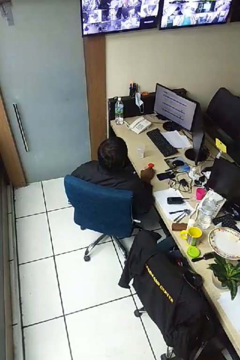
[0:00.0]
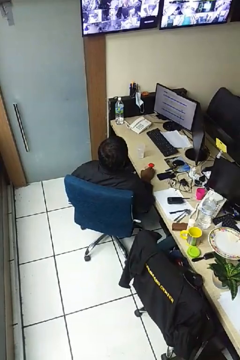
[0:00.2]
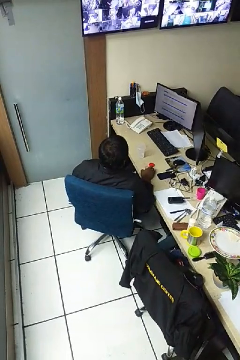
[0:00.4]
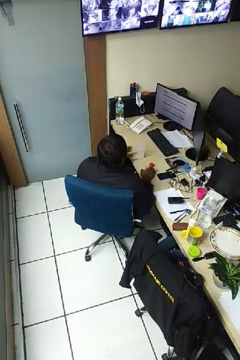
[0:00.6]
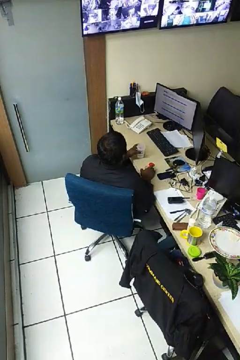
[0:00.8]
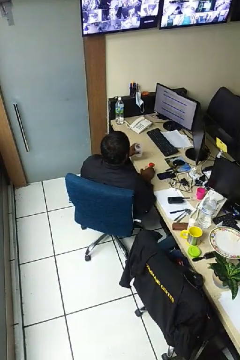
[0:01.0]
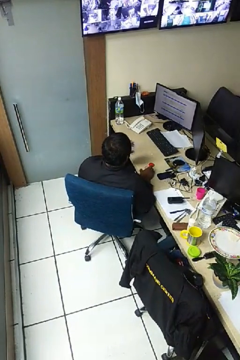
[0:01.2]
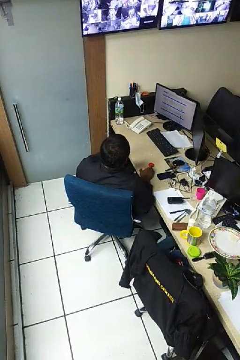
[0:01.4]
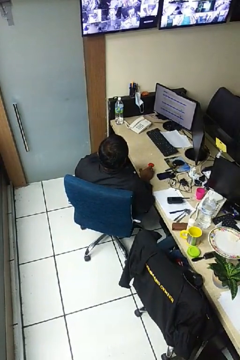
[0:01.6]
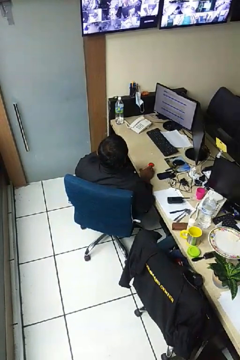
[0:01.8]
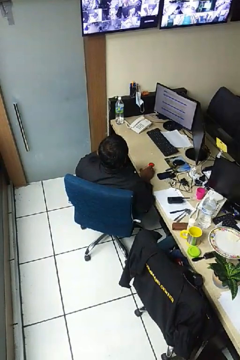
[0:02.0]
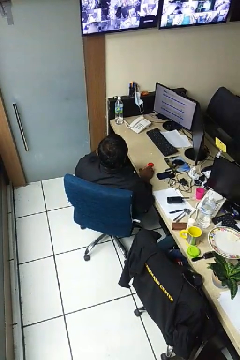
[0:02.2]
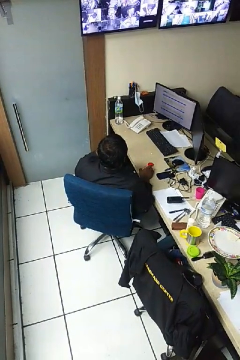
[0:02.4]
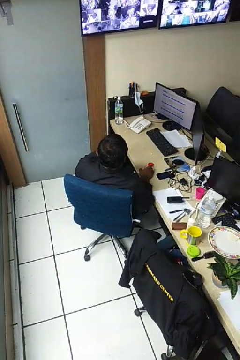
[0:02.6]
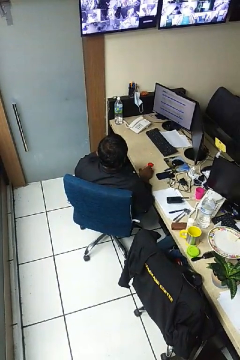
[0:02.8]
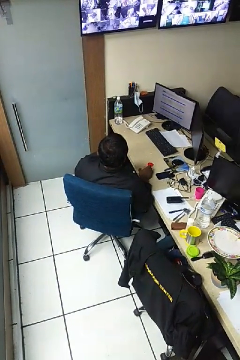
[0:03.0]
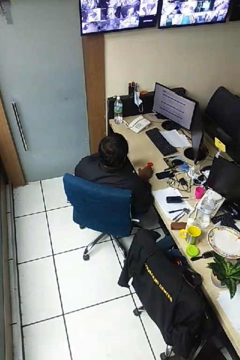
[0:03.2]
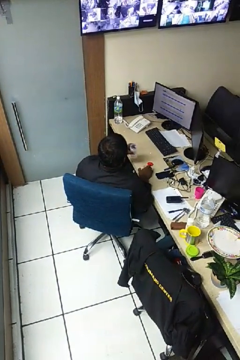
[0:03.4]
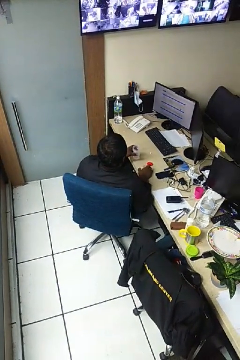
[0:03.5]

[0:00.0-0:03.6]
person drinks from cup

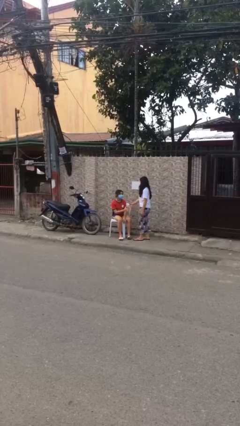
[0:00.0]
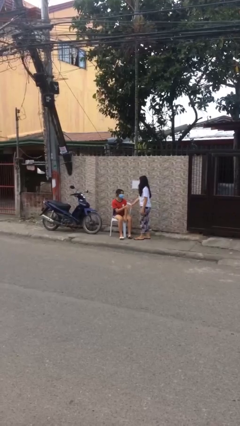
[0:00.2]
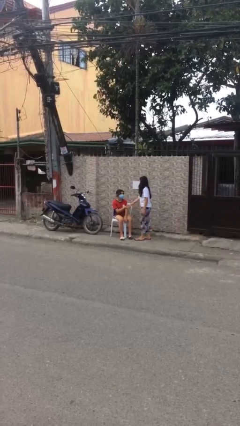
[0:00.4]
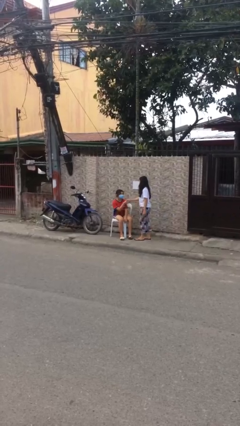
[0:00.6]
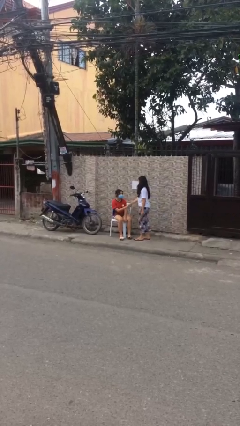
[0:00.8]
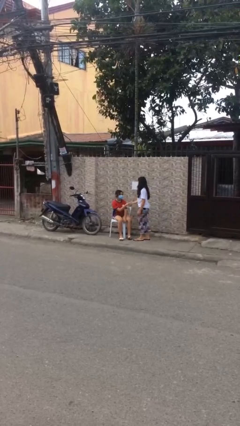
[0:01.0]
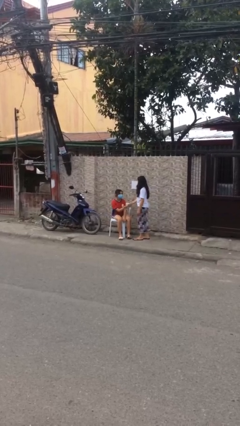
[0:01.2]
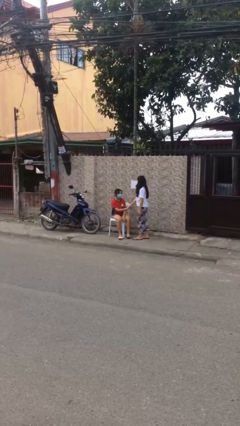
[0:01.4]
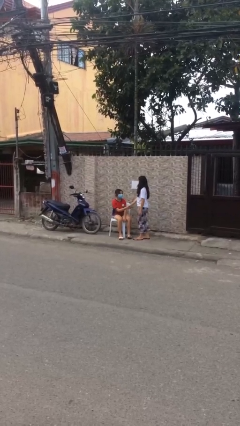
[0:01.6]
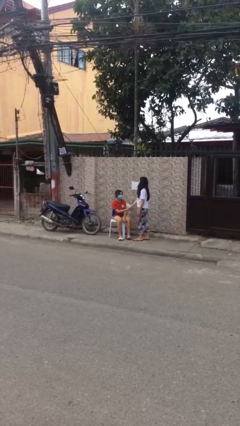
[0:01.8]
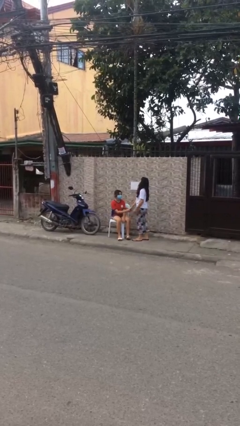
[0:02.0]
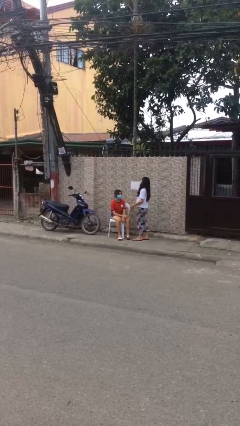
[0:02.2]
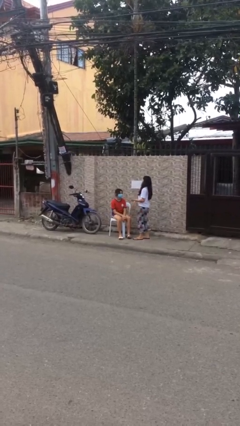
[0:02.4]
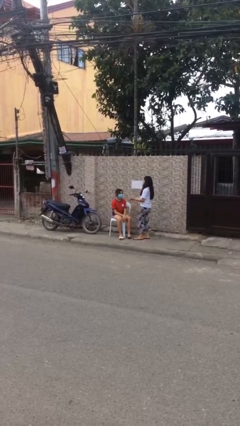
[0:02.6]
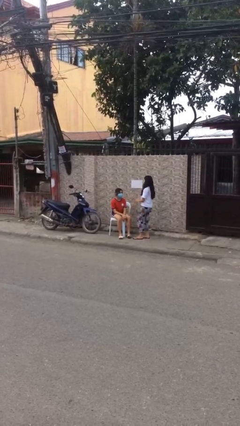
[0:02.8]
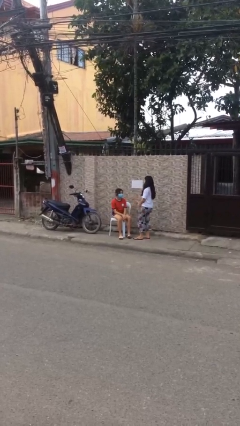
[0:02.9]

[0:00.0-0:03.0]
person shakes hand

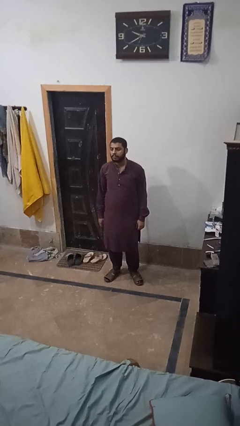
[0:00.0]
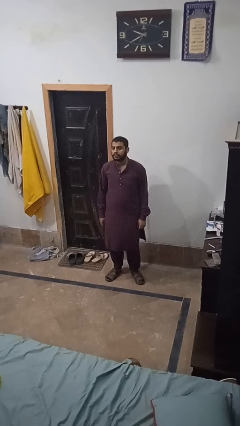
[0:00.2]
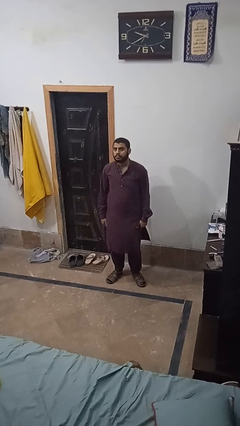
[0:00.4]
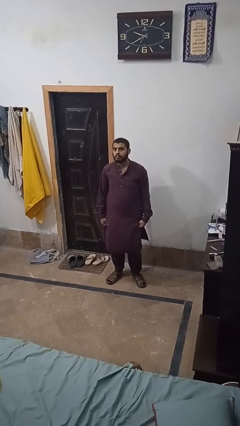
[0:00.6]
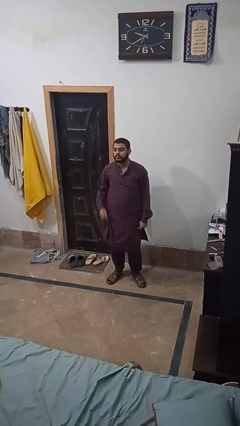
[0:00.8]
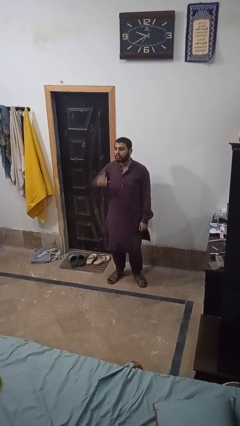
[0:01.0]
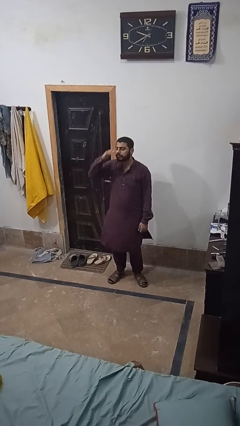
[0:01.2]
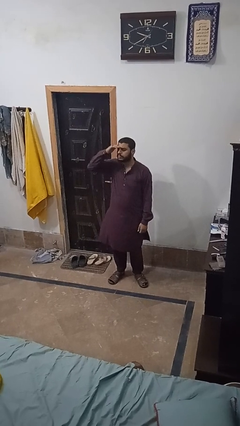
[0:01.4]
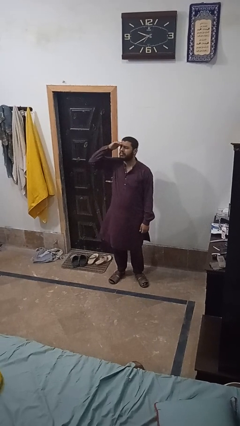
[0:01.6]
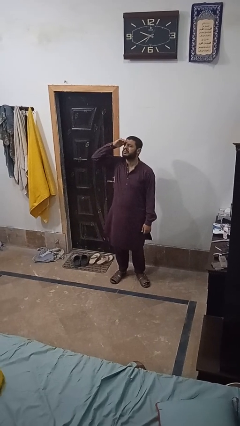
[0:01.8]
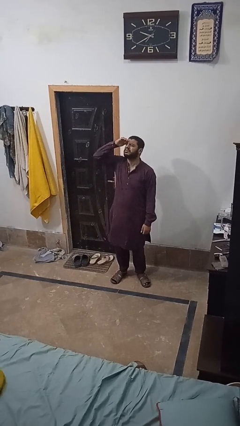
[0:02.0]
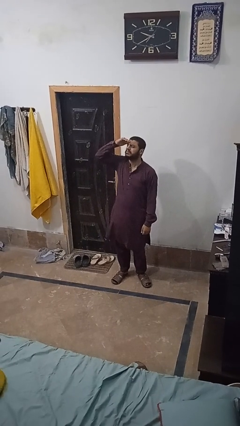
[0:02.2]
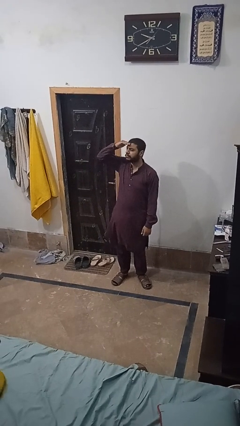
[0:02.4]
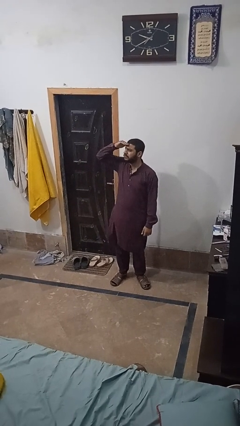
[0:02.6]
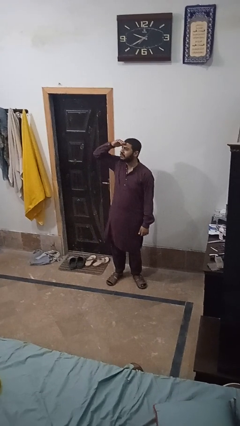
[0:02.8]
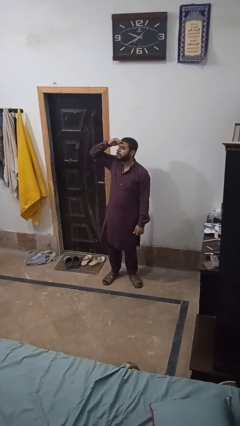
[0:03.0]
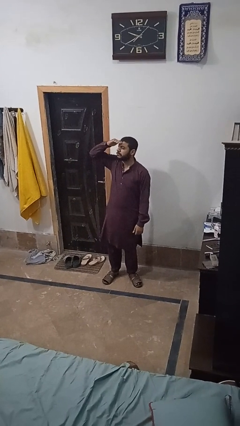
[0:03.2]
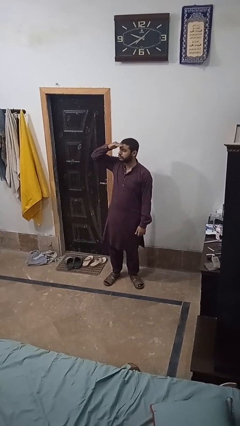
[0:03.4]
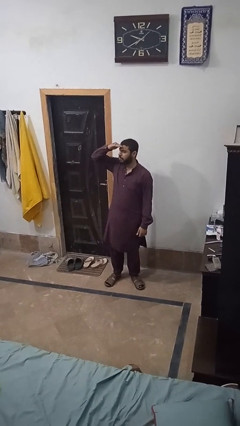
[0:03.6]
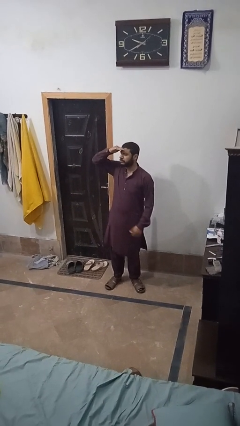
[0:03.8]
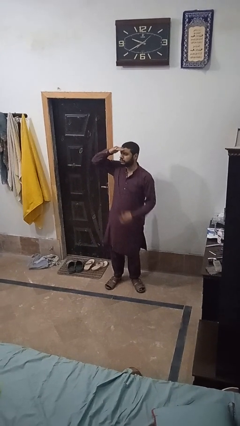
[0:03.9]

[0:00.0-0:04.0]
person shades eyes

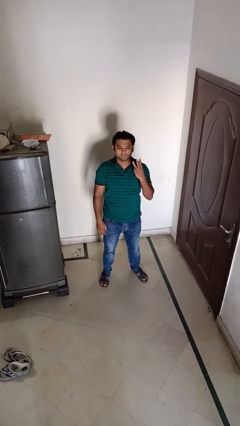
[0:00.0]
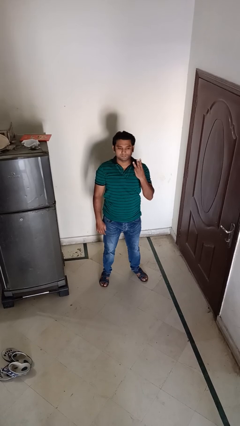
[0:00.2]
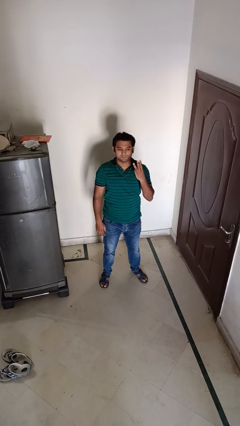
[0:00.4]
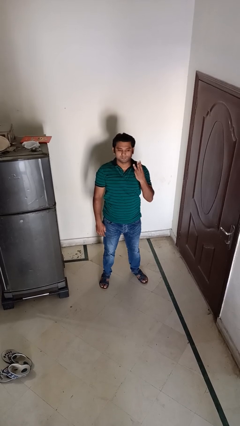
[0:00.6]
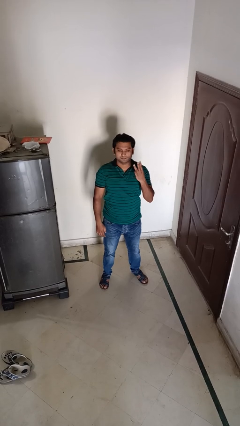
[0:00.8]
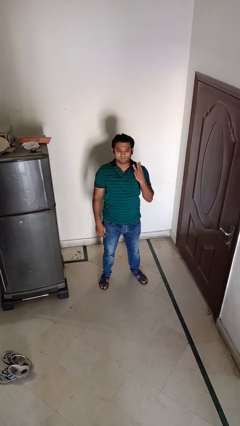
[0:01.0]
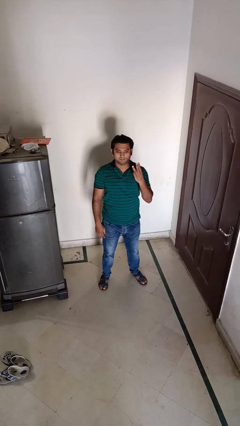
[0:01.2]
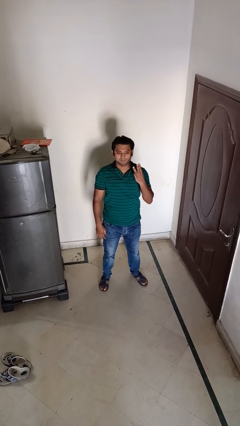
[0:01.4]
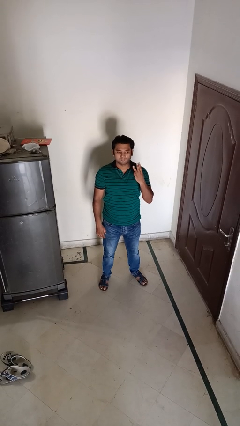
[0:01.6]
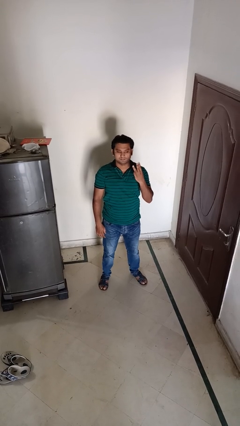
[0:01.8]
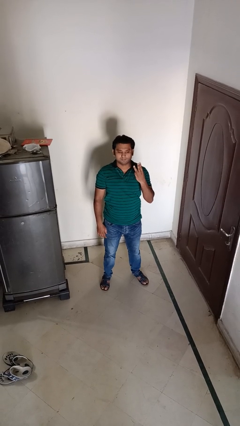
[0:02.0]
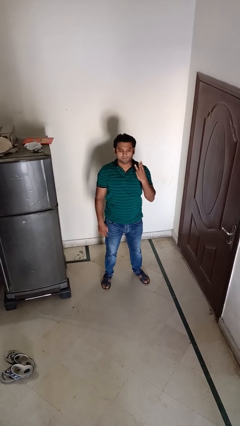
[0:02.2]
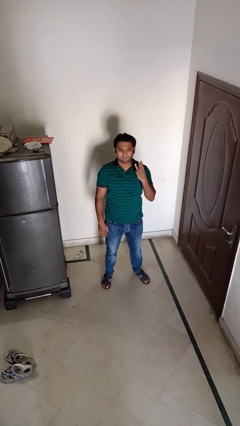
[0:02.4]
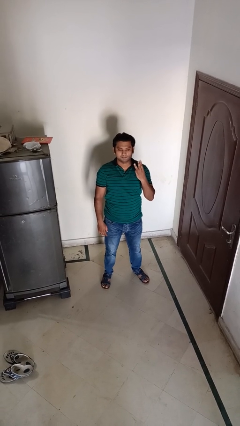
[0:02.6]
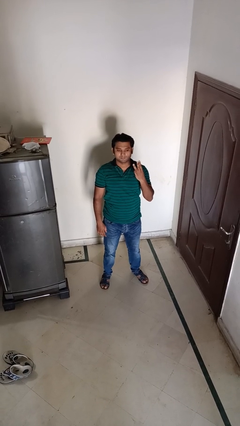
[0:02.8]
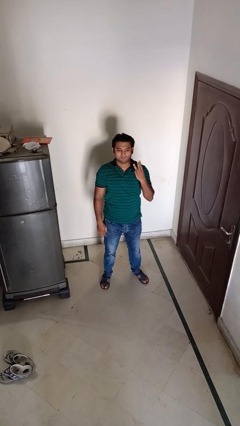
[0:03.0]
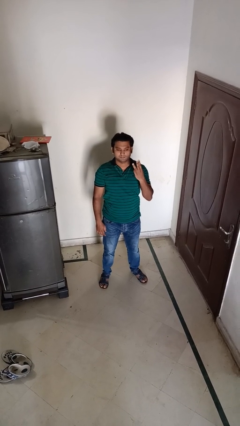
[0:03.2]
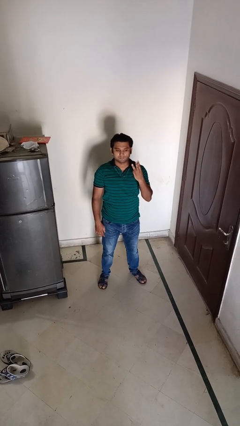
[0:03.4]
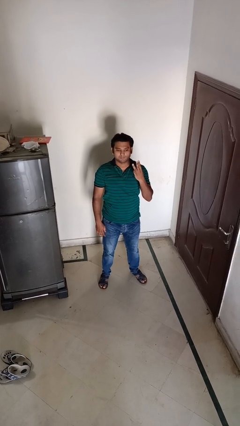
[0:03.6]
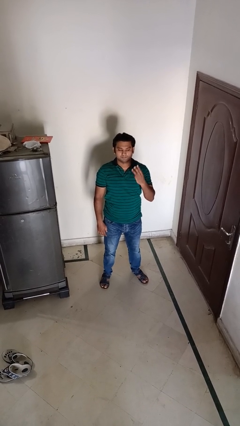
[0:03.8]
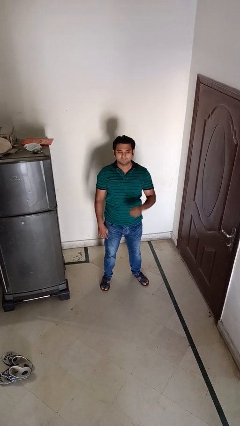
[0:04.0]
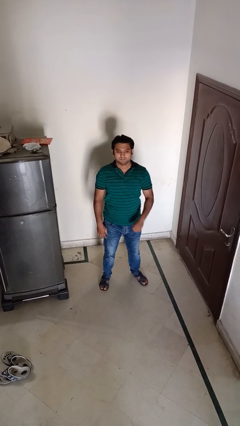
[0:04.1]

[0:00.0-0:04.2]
person gestures number three

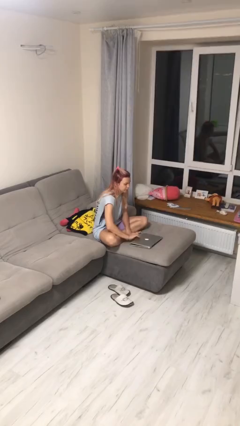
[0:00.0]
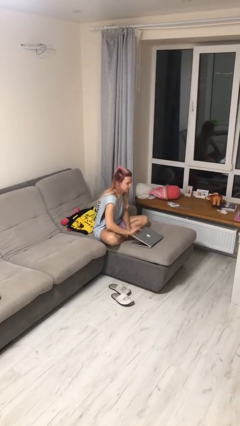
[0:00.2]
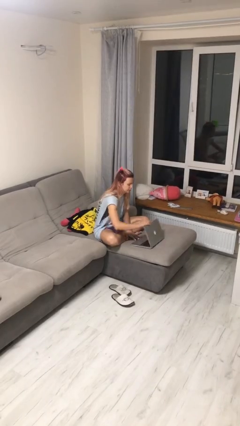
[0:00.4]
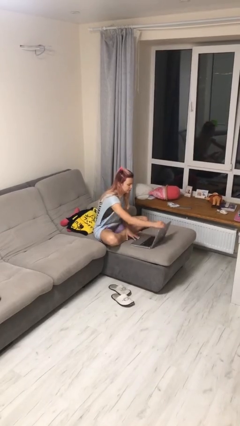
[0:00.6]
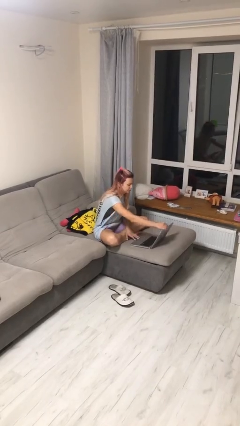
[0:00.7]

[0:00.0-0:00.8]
person opens laptop

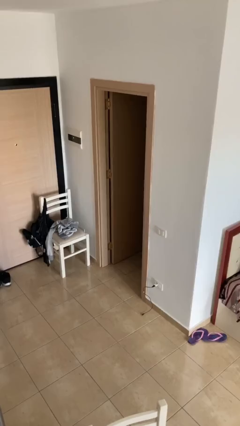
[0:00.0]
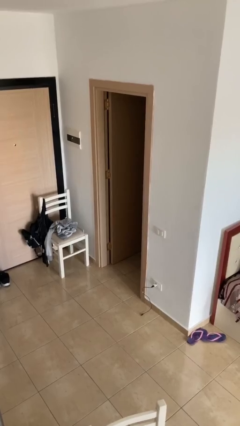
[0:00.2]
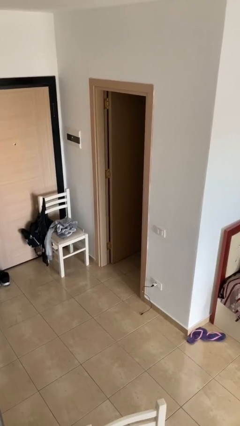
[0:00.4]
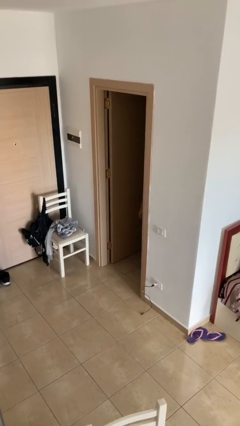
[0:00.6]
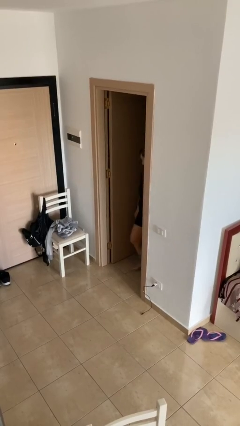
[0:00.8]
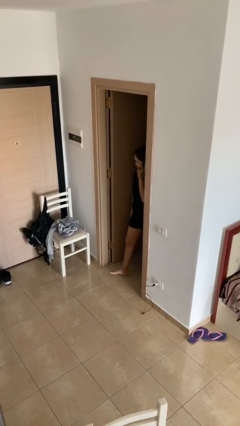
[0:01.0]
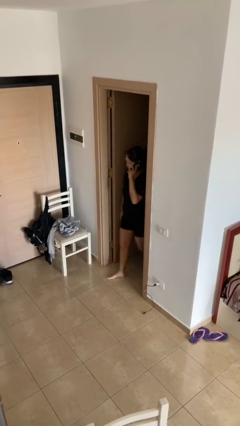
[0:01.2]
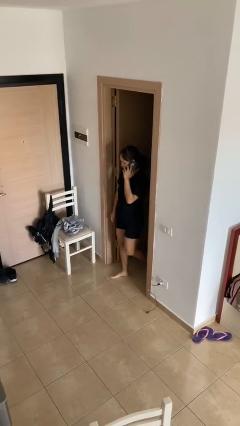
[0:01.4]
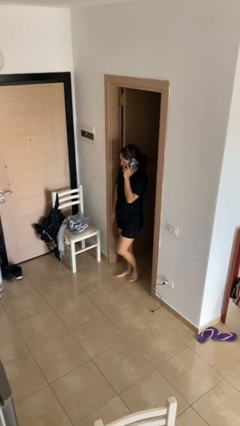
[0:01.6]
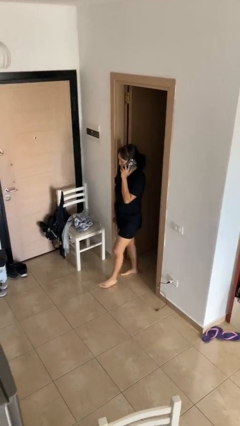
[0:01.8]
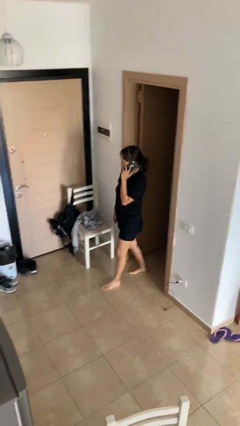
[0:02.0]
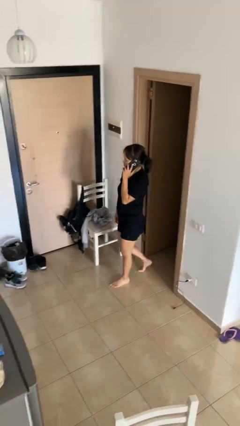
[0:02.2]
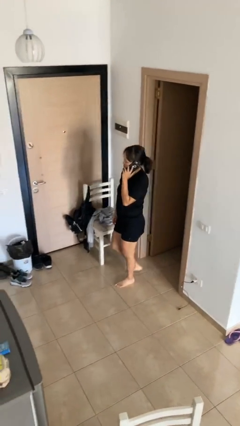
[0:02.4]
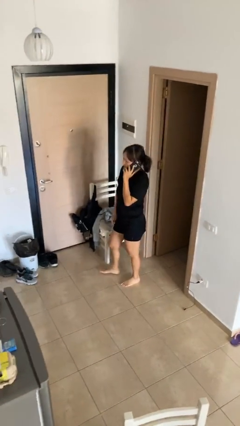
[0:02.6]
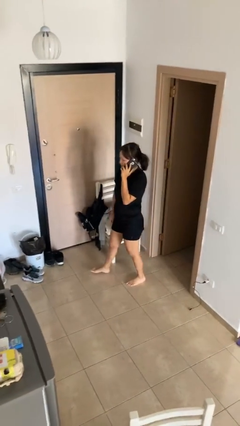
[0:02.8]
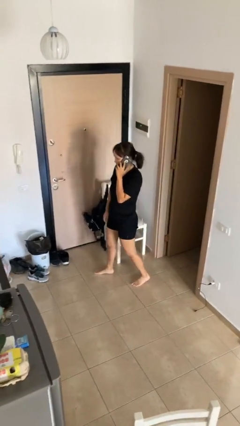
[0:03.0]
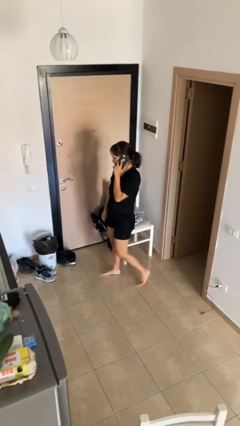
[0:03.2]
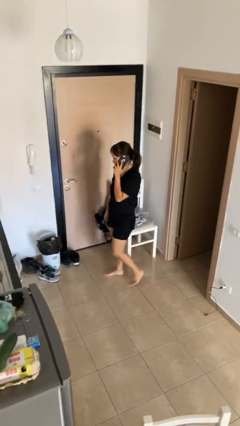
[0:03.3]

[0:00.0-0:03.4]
person enters scene through structure
